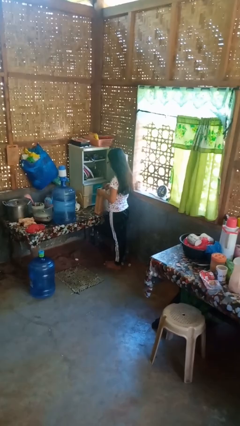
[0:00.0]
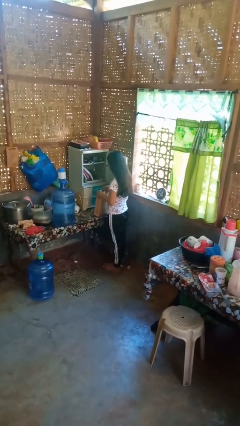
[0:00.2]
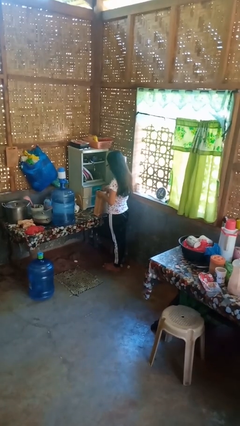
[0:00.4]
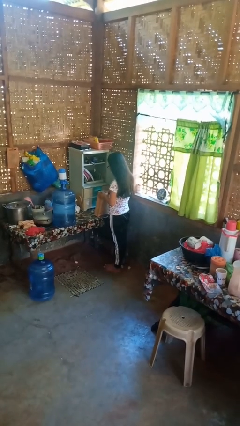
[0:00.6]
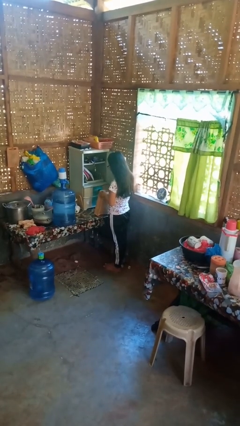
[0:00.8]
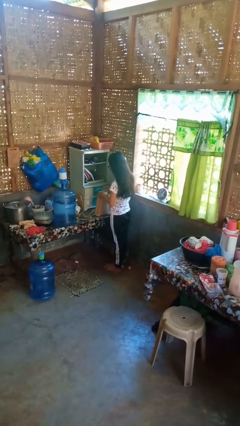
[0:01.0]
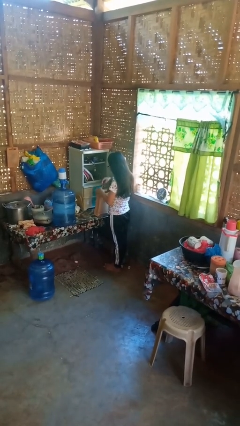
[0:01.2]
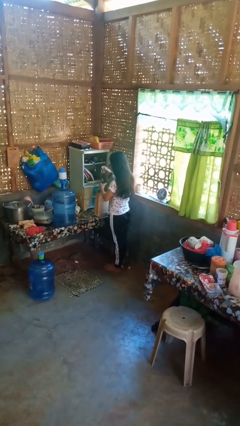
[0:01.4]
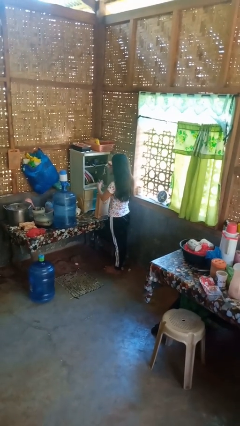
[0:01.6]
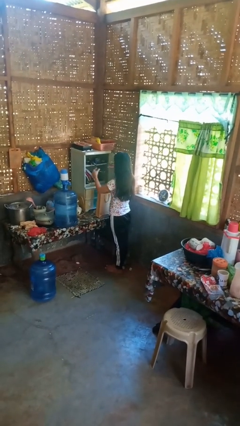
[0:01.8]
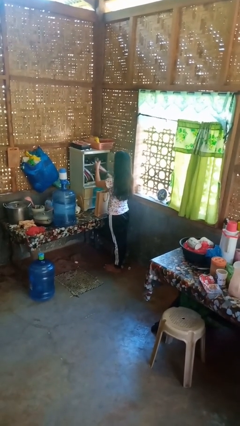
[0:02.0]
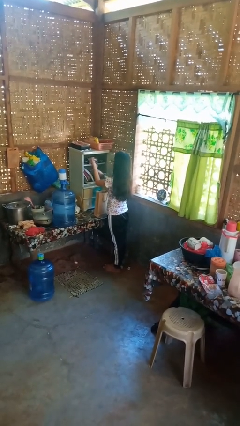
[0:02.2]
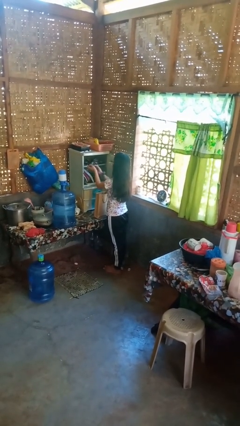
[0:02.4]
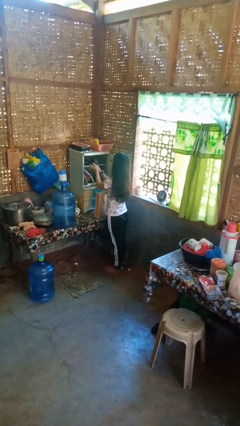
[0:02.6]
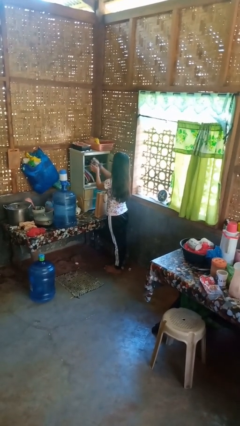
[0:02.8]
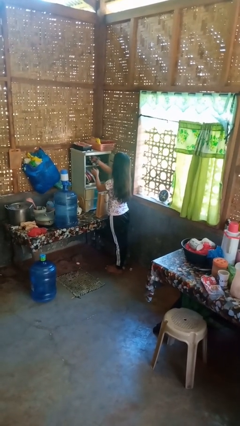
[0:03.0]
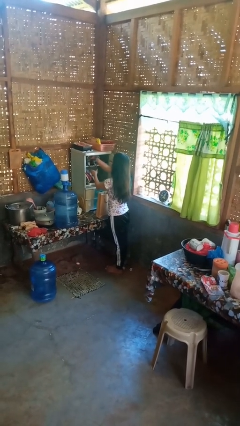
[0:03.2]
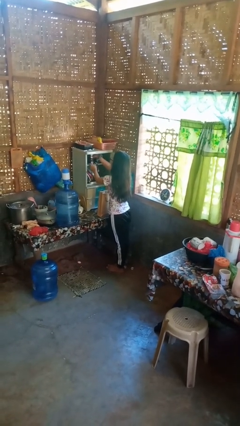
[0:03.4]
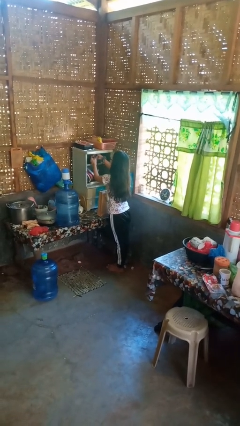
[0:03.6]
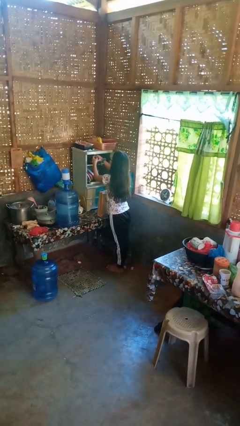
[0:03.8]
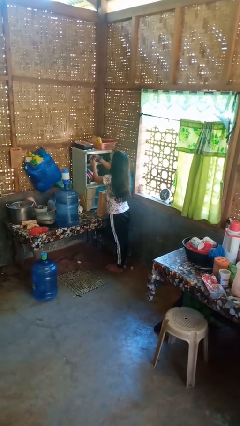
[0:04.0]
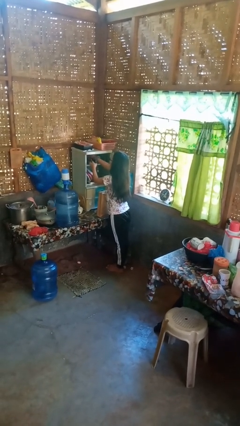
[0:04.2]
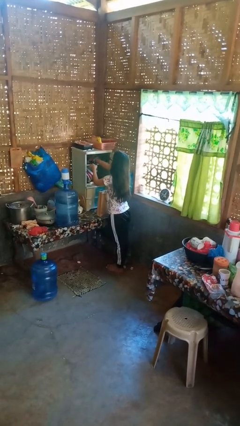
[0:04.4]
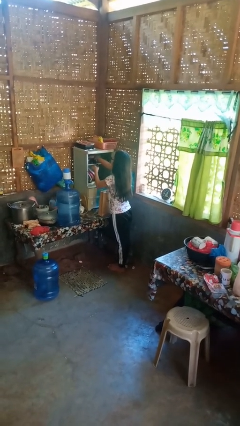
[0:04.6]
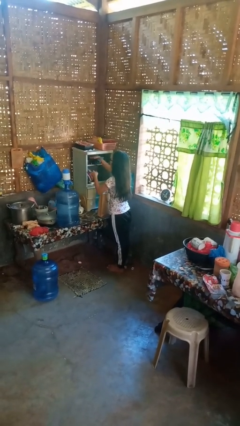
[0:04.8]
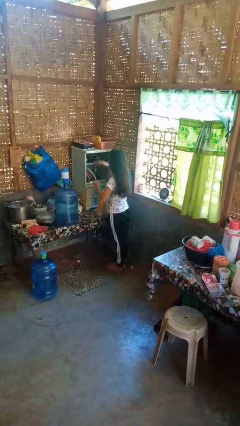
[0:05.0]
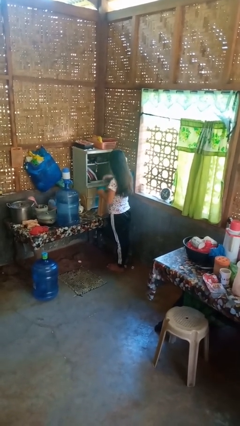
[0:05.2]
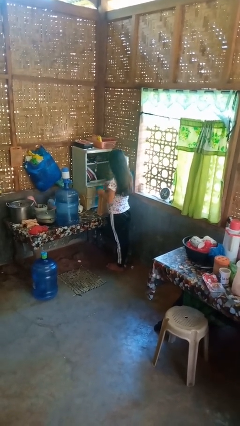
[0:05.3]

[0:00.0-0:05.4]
person loads groceries into cabinet

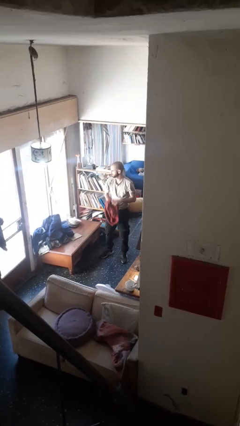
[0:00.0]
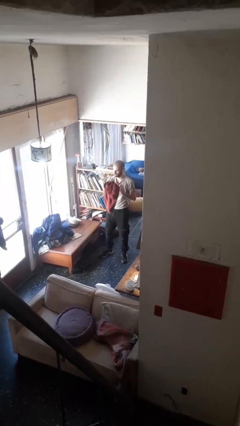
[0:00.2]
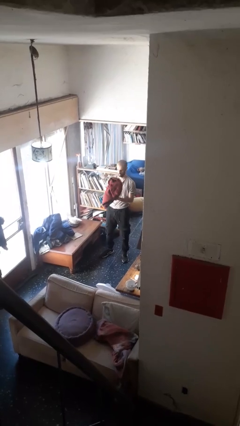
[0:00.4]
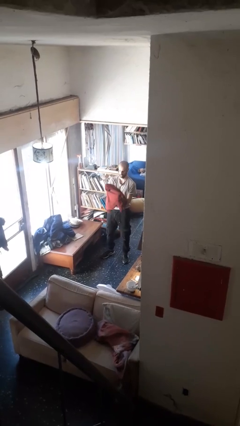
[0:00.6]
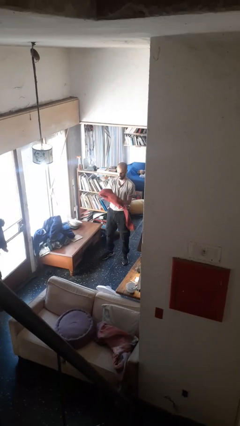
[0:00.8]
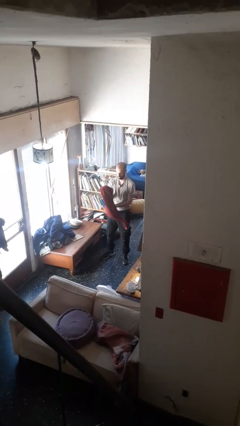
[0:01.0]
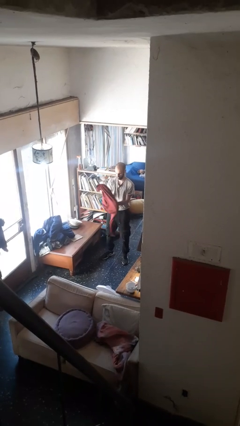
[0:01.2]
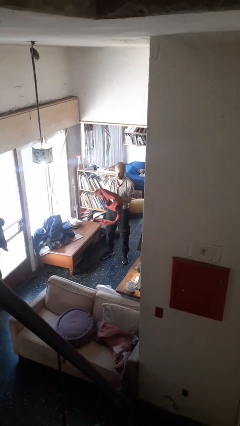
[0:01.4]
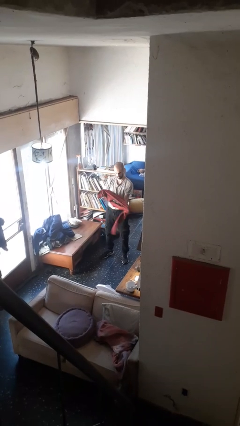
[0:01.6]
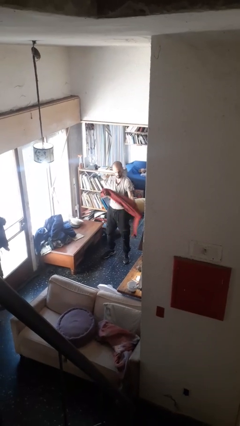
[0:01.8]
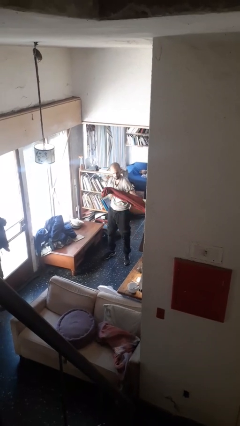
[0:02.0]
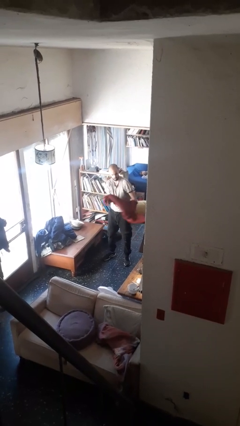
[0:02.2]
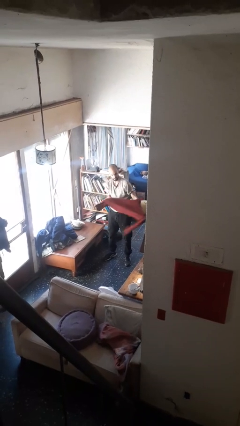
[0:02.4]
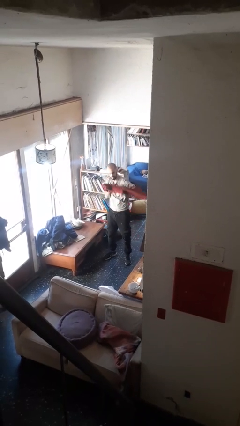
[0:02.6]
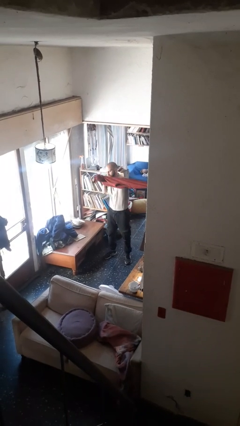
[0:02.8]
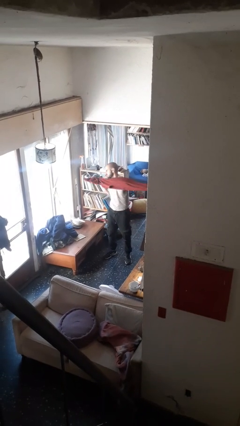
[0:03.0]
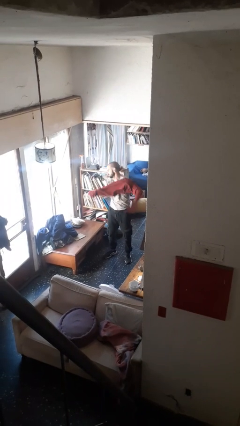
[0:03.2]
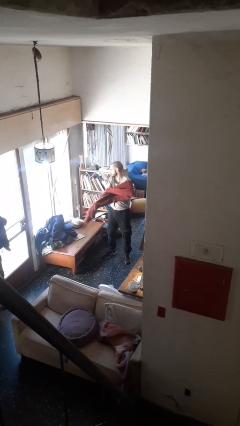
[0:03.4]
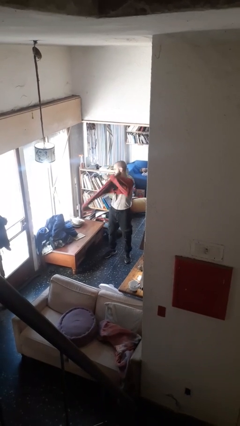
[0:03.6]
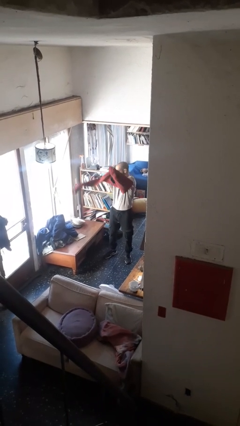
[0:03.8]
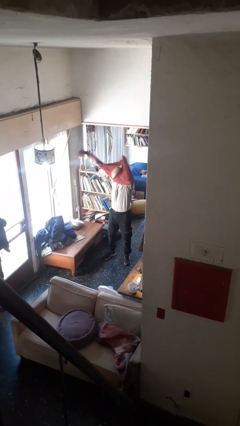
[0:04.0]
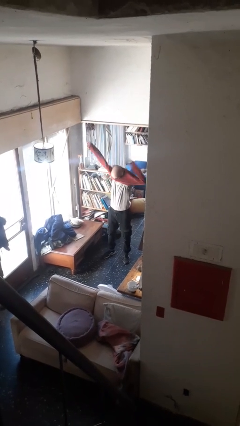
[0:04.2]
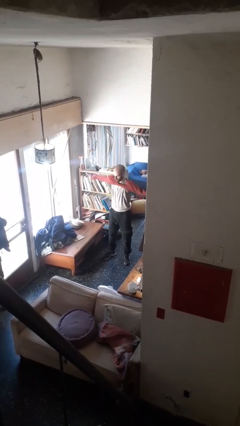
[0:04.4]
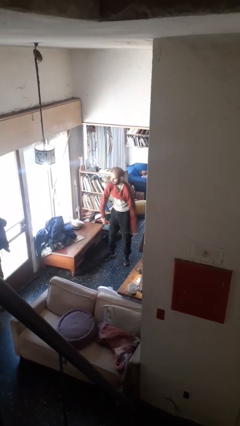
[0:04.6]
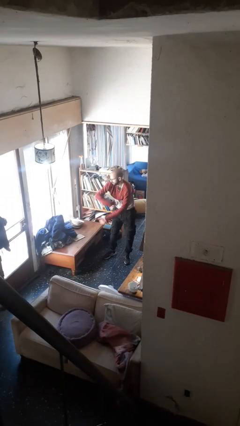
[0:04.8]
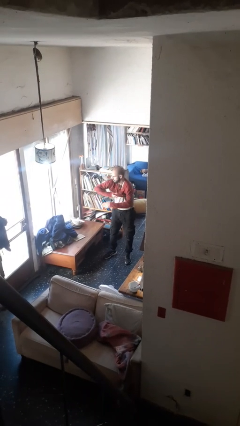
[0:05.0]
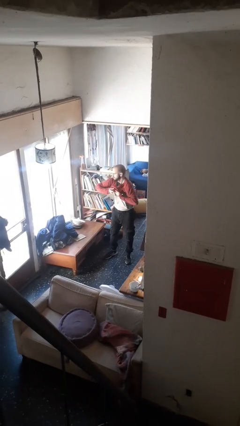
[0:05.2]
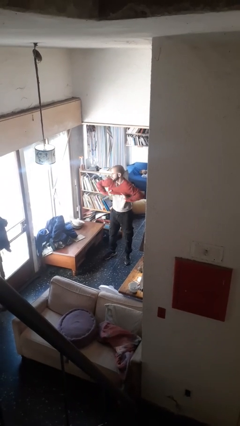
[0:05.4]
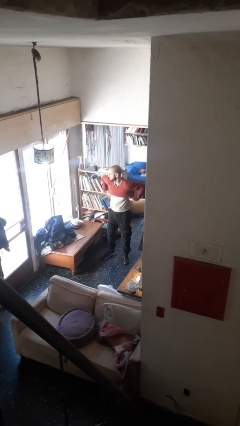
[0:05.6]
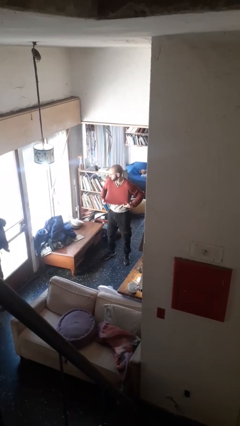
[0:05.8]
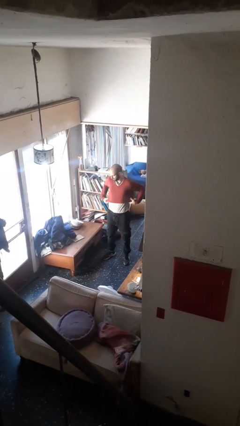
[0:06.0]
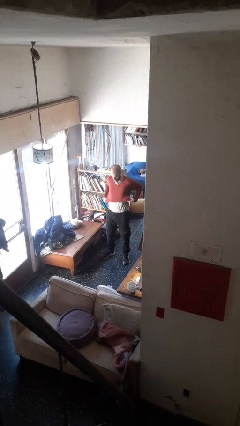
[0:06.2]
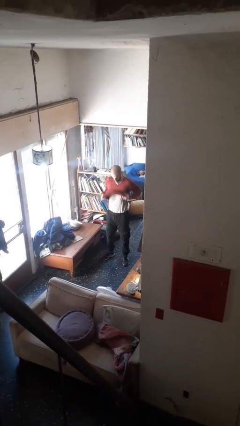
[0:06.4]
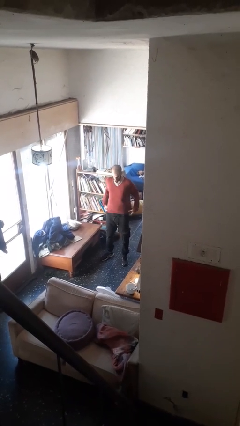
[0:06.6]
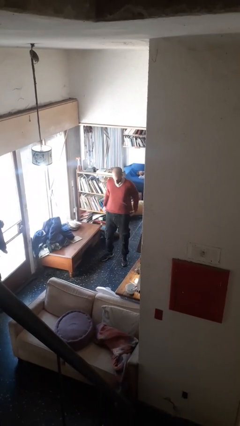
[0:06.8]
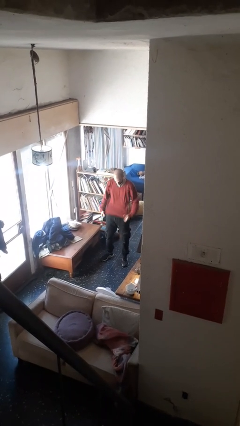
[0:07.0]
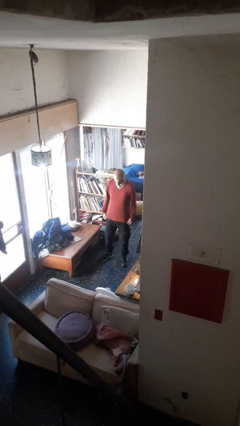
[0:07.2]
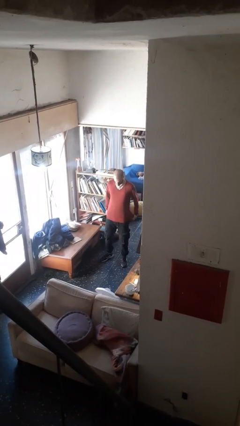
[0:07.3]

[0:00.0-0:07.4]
person puts on shirt

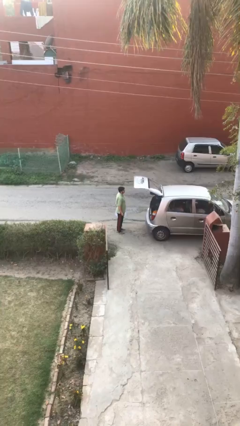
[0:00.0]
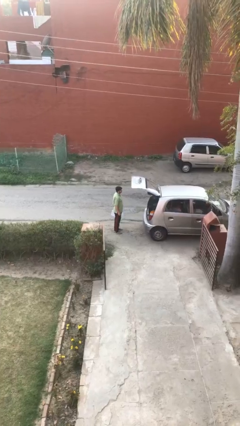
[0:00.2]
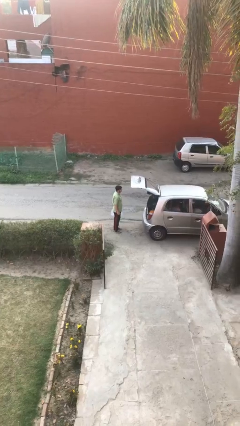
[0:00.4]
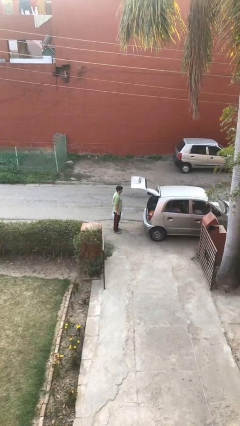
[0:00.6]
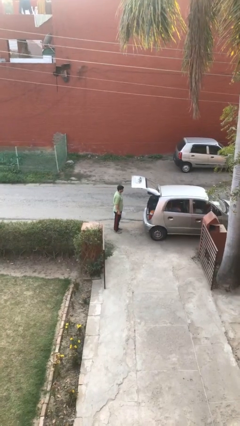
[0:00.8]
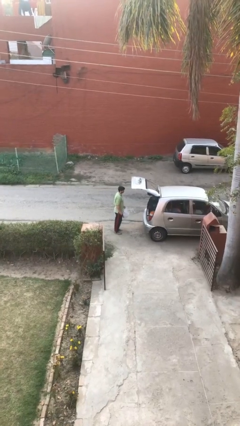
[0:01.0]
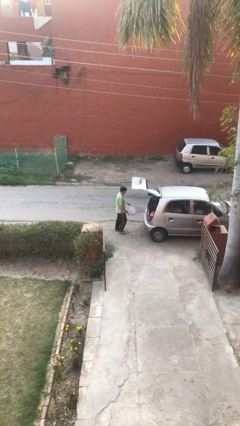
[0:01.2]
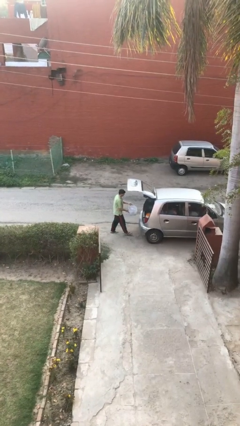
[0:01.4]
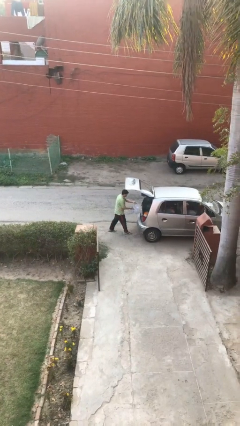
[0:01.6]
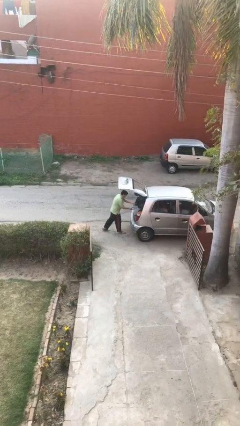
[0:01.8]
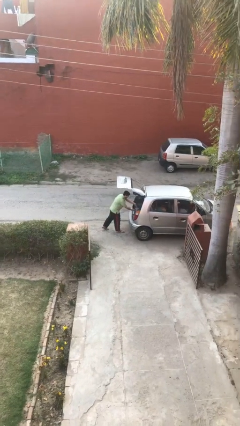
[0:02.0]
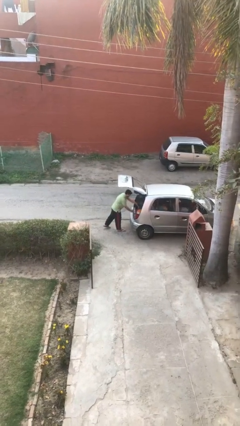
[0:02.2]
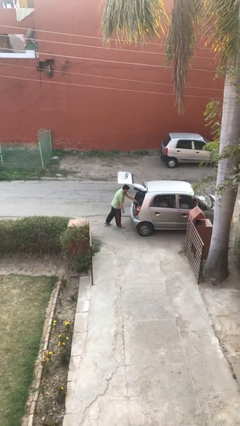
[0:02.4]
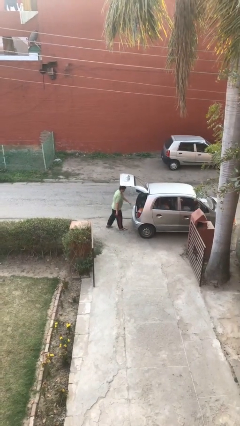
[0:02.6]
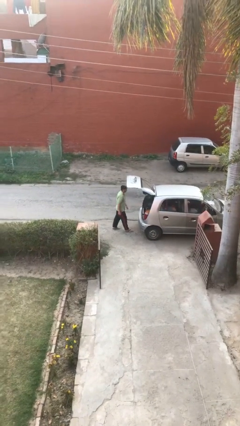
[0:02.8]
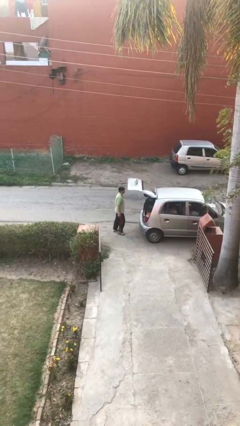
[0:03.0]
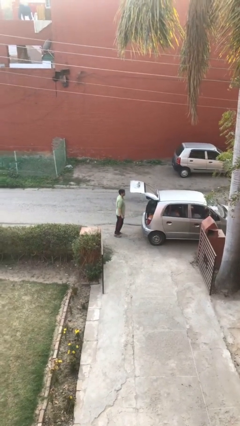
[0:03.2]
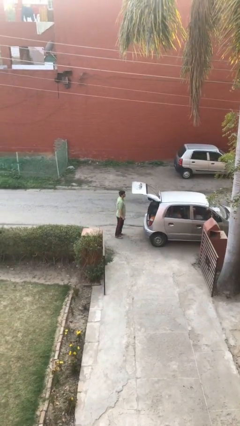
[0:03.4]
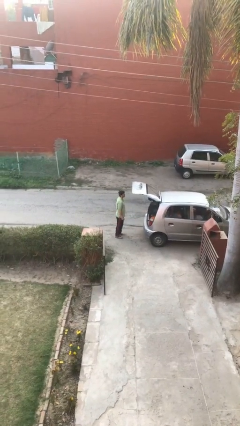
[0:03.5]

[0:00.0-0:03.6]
person loads car

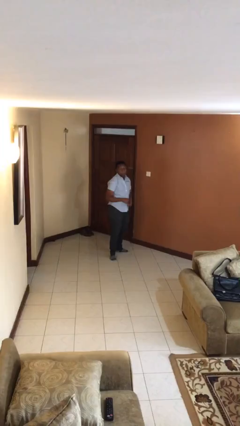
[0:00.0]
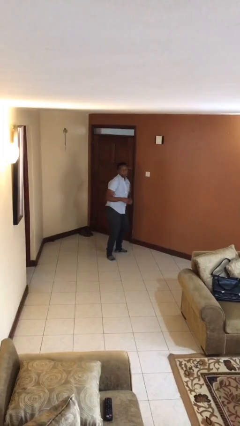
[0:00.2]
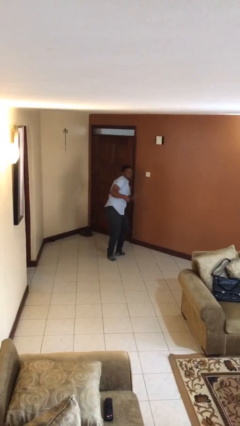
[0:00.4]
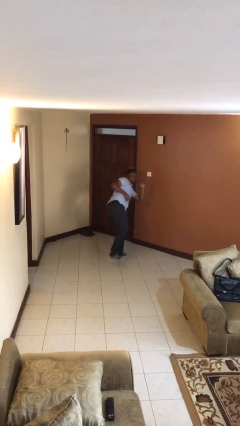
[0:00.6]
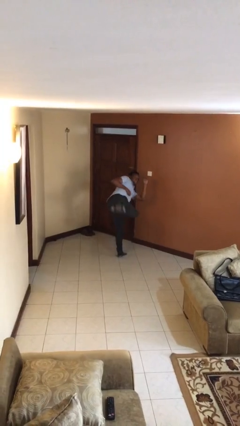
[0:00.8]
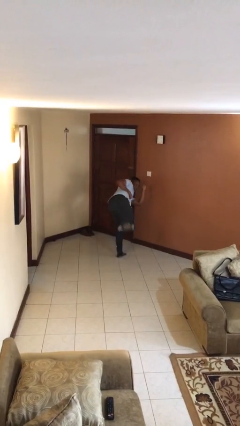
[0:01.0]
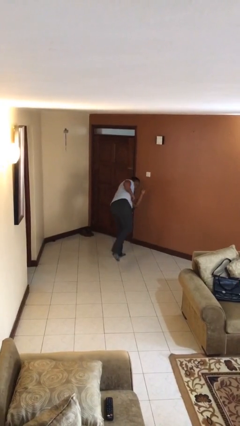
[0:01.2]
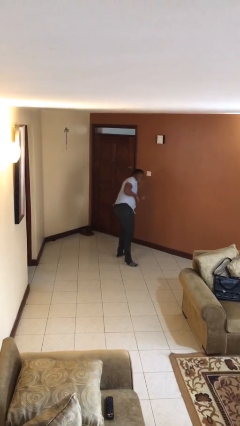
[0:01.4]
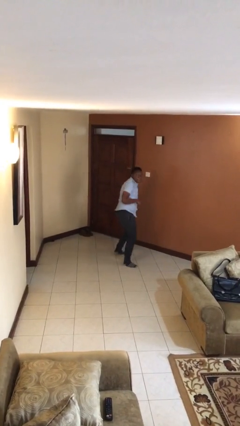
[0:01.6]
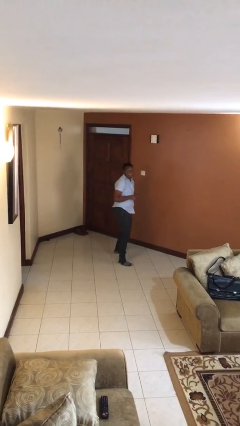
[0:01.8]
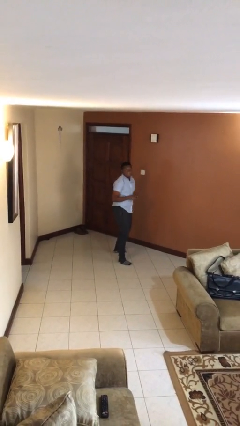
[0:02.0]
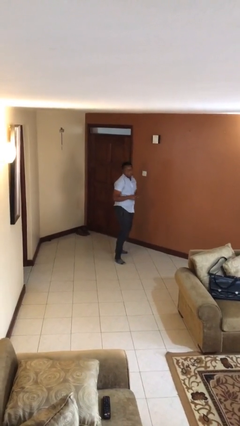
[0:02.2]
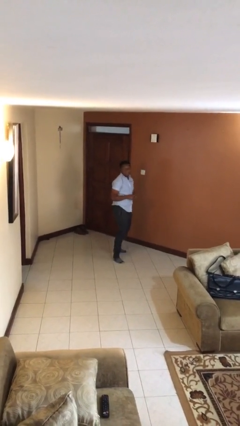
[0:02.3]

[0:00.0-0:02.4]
person karate kicks
